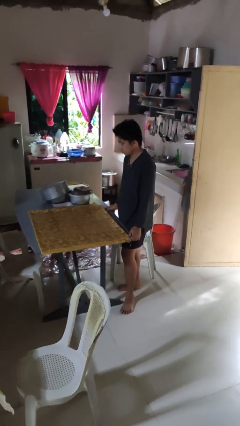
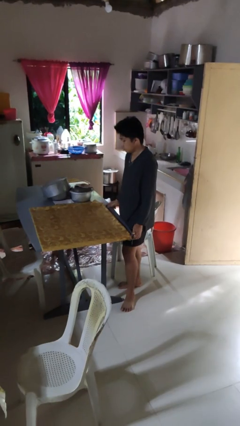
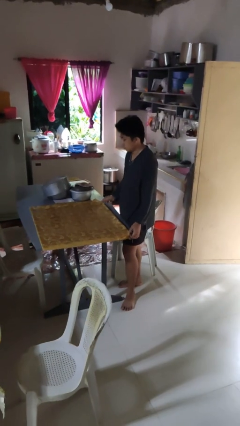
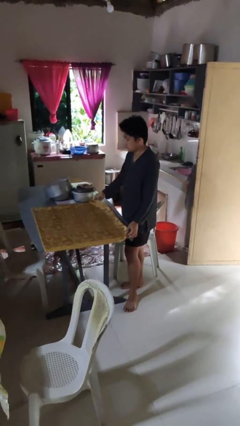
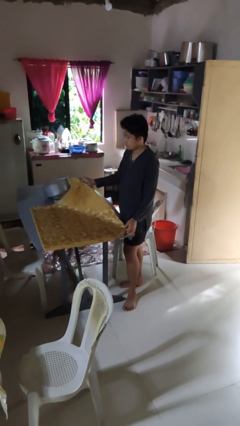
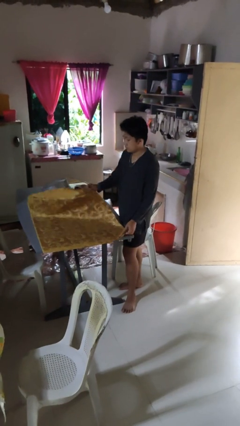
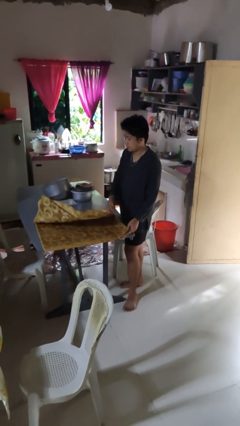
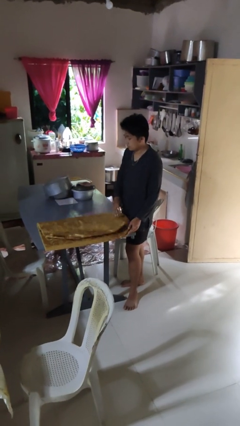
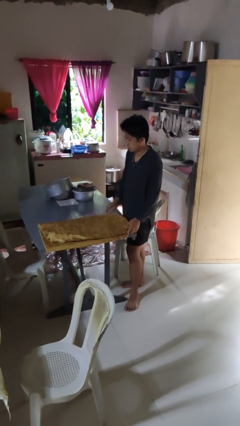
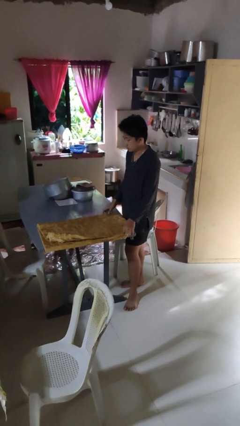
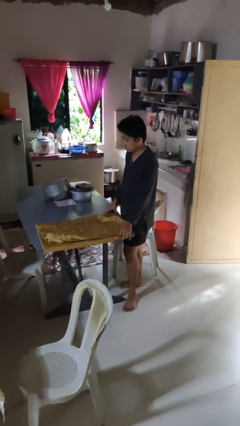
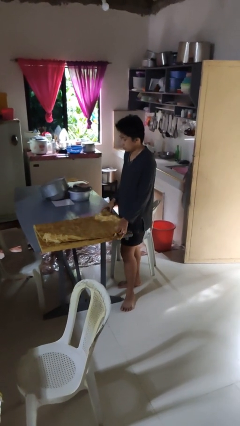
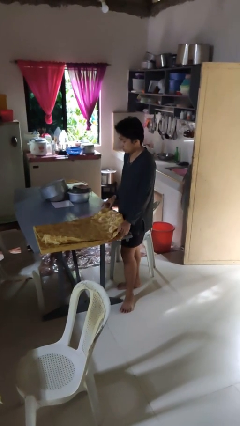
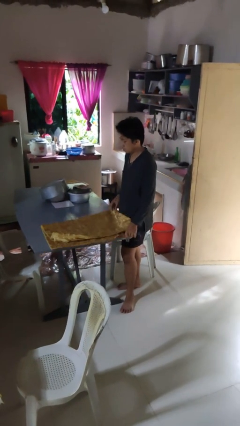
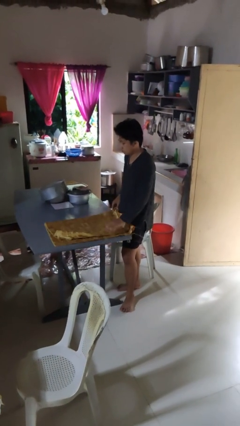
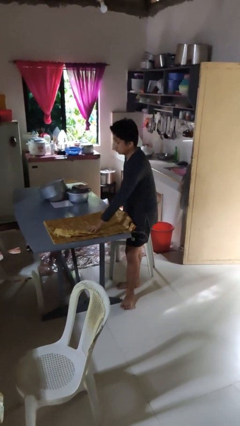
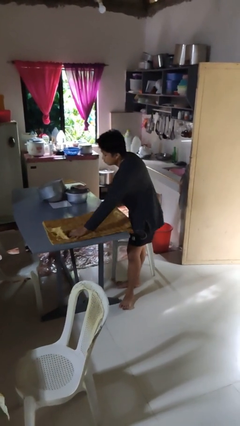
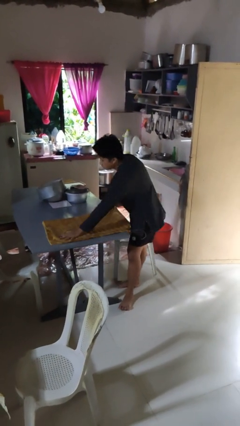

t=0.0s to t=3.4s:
person folds tablecloth

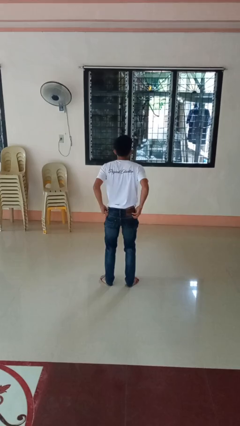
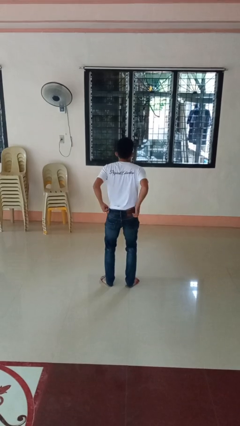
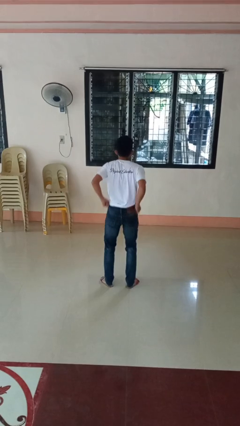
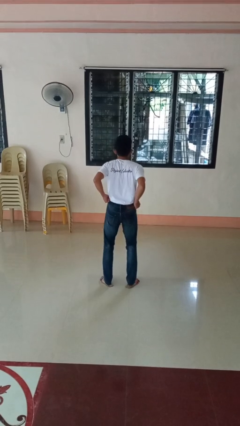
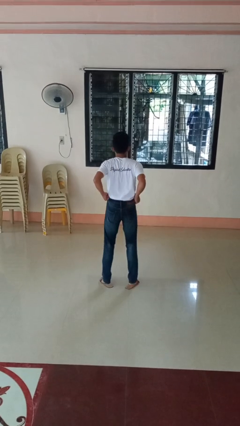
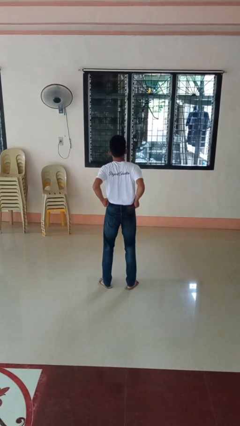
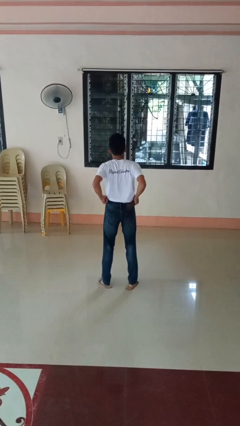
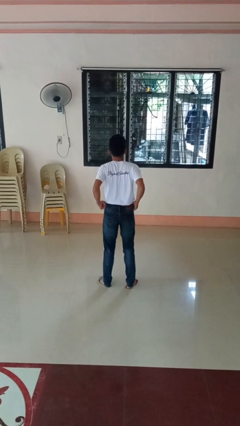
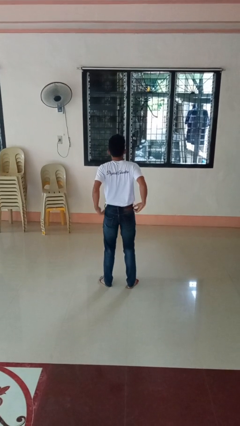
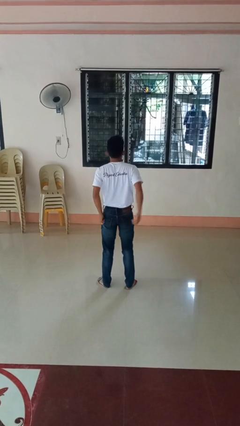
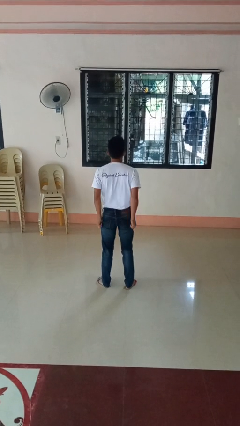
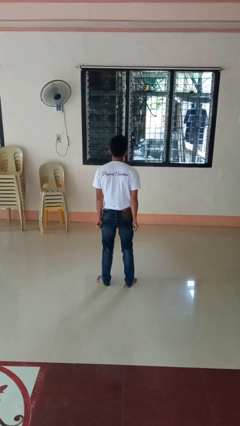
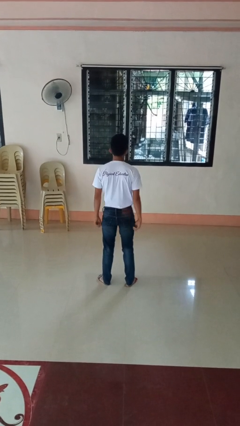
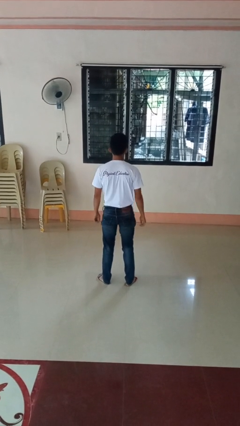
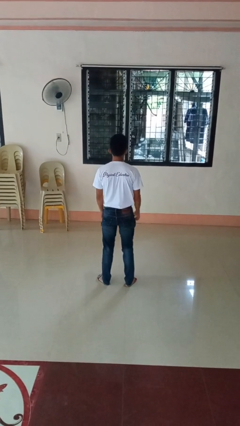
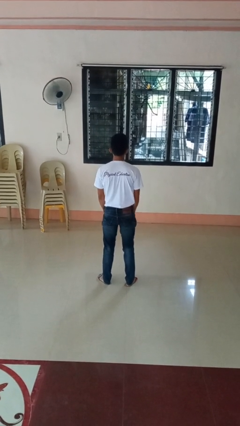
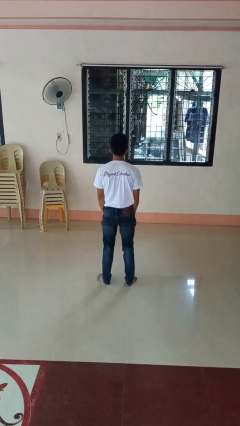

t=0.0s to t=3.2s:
person hikes up pants

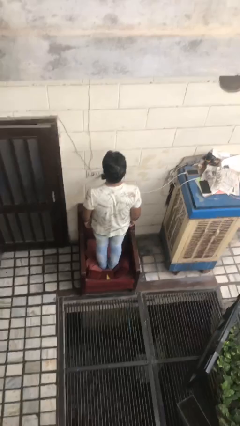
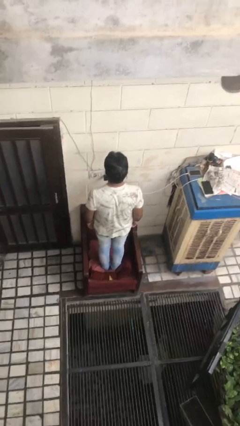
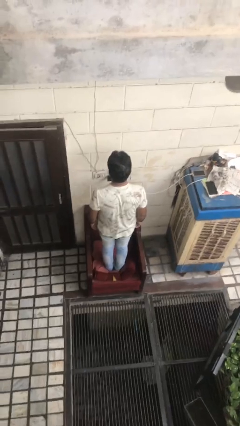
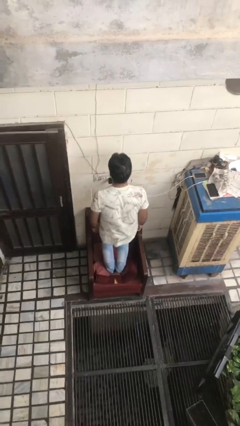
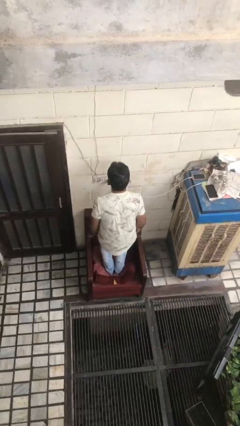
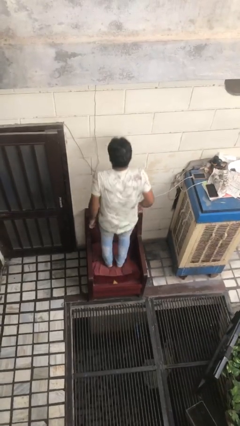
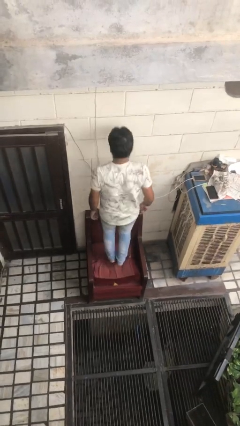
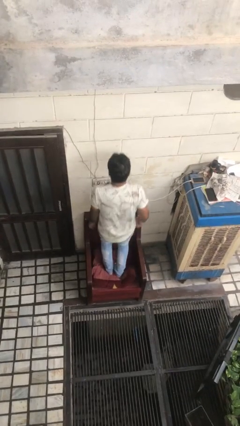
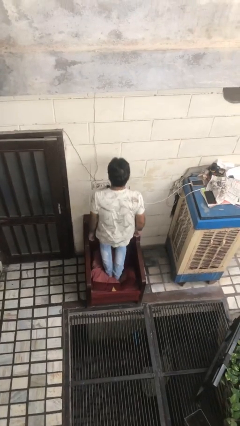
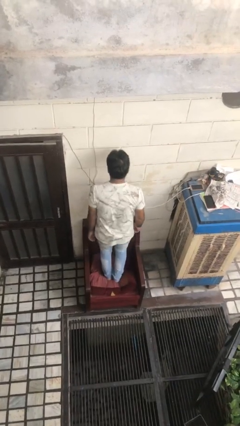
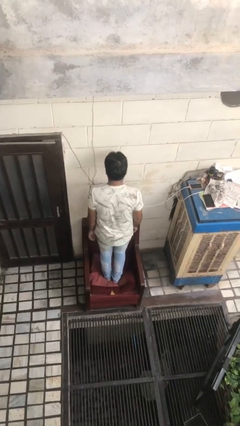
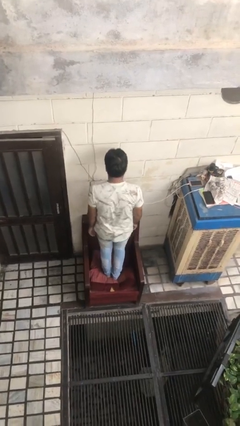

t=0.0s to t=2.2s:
person jumps on couch

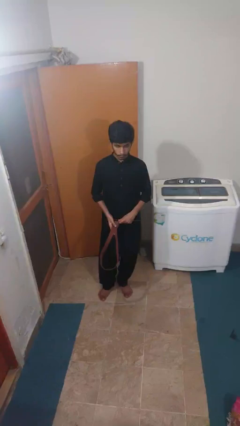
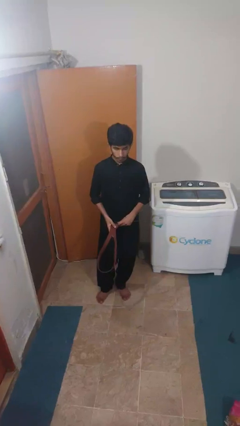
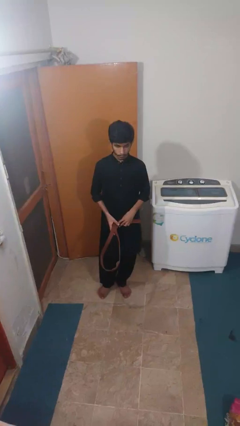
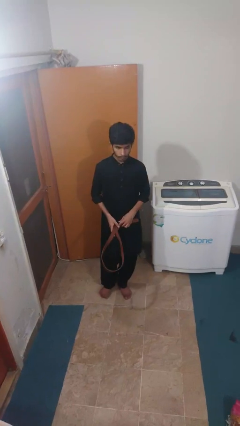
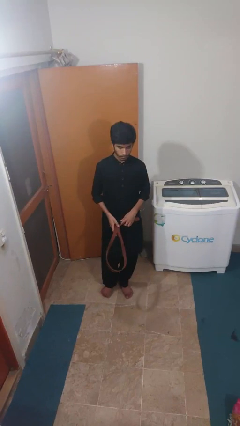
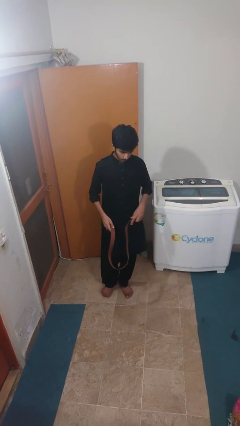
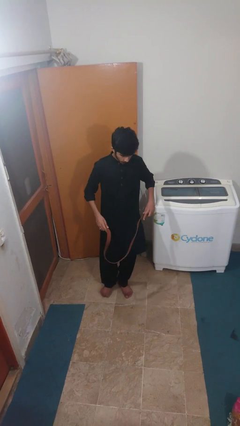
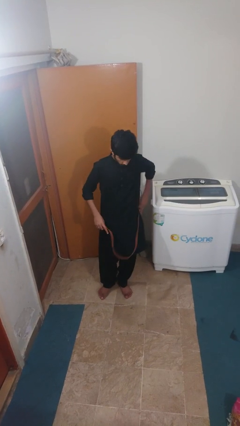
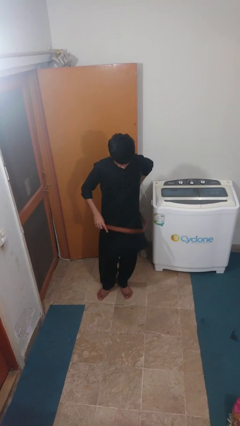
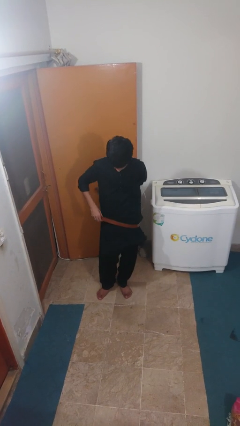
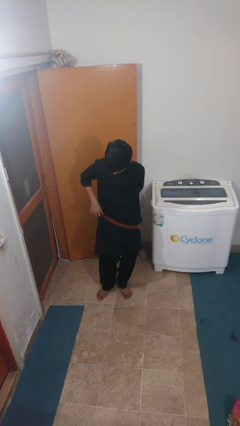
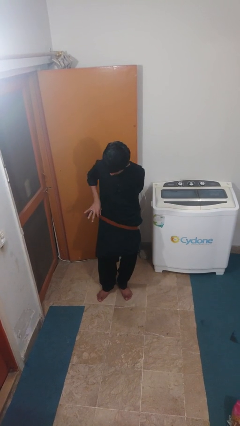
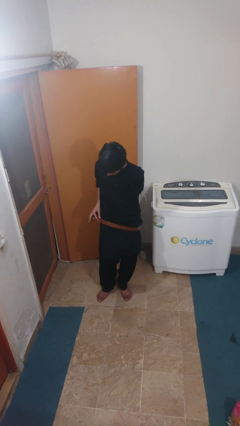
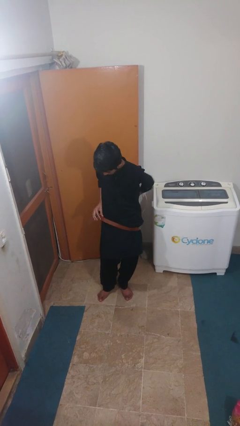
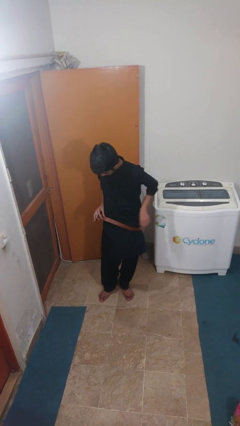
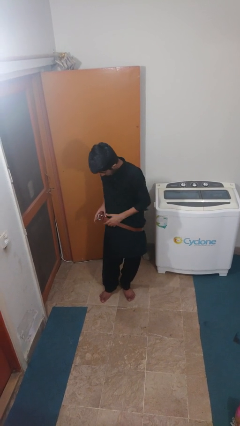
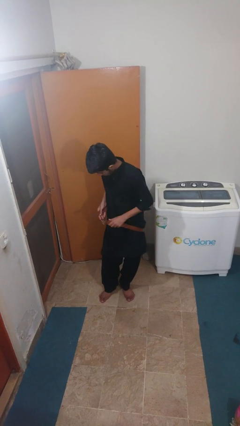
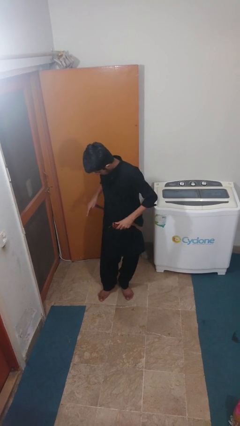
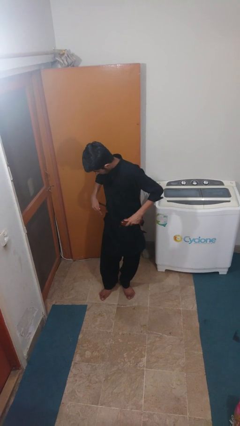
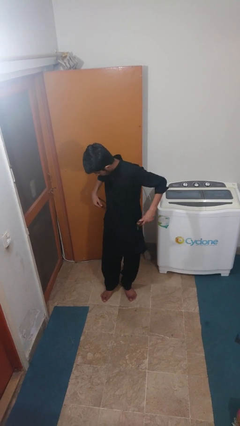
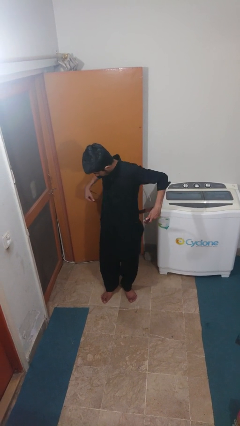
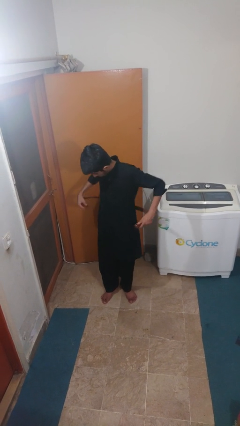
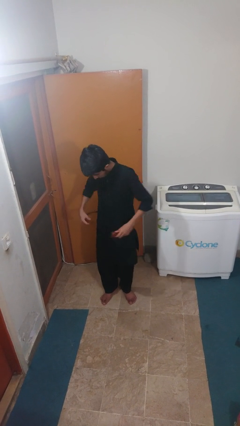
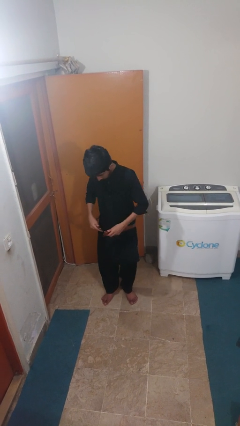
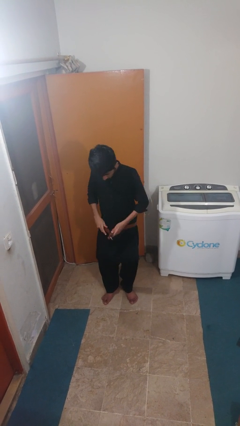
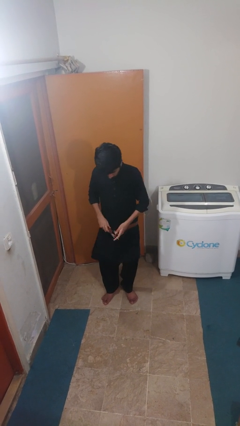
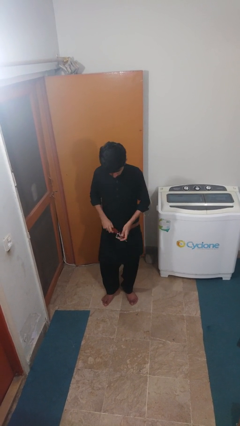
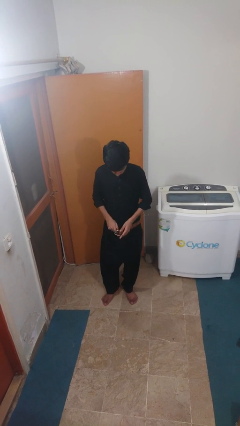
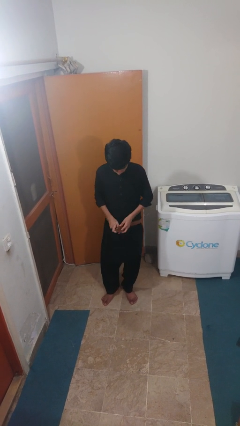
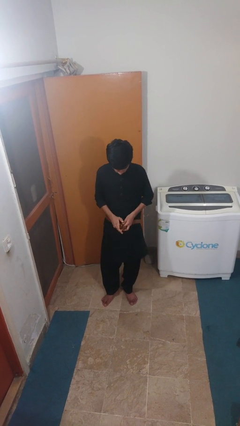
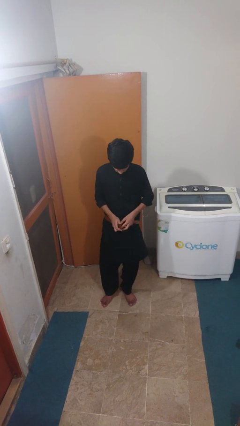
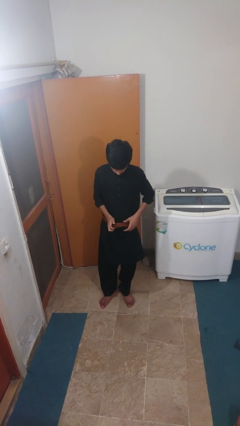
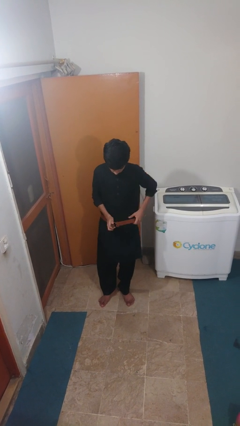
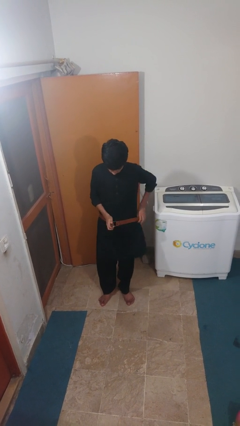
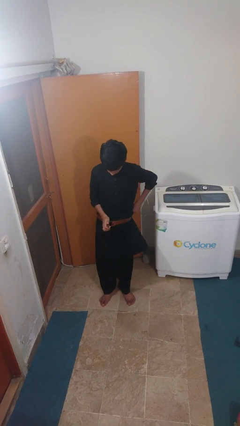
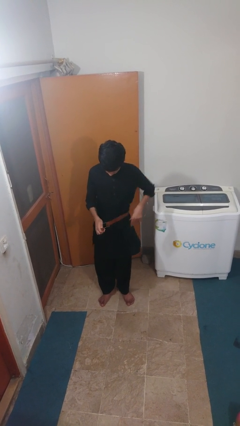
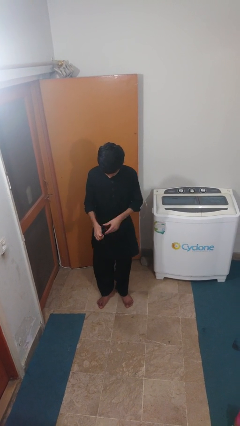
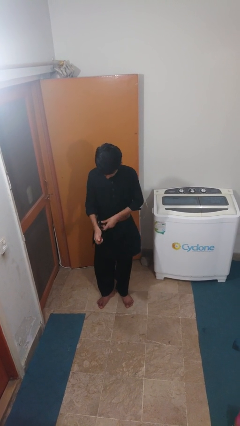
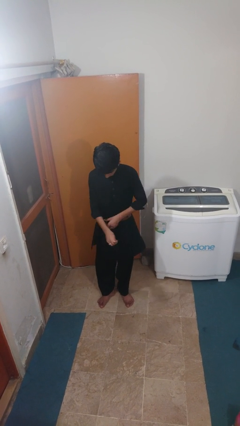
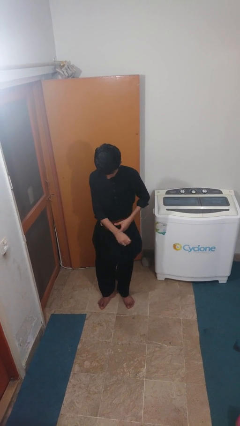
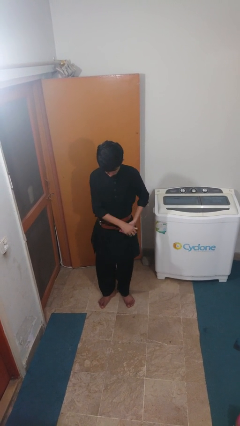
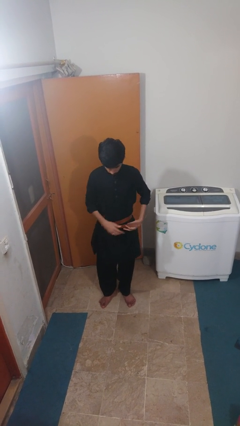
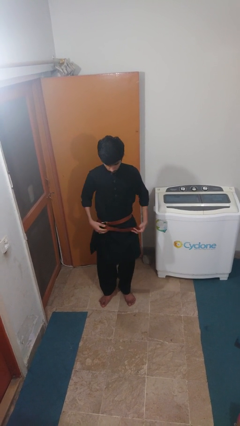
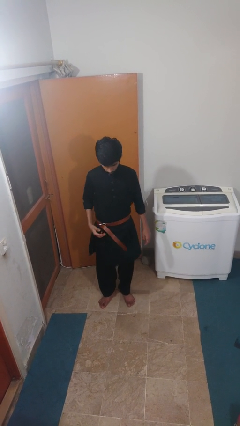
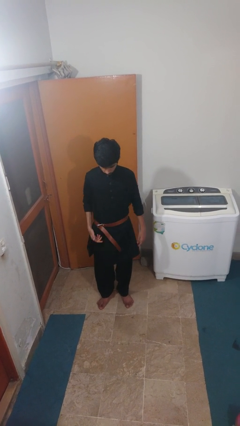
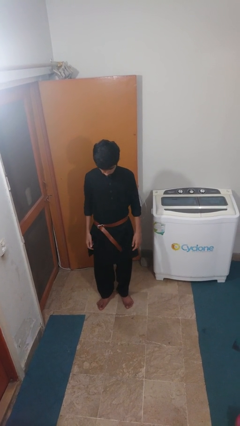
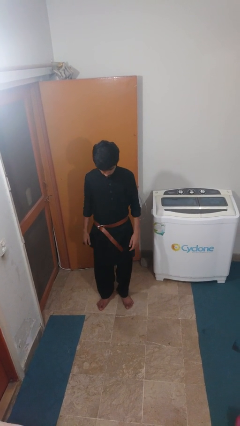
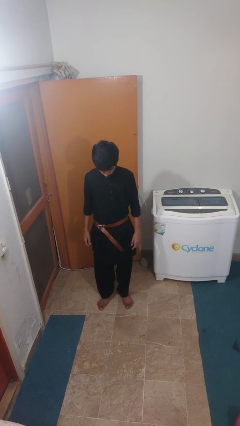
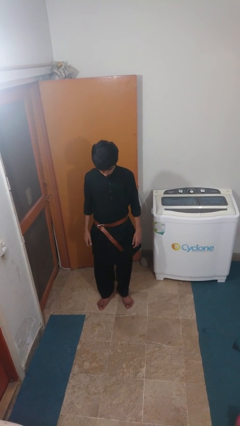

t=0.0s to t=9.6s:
person puts on belt
